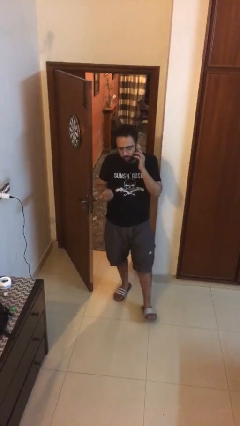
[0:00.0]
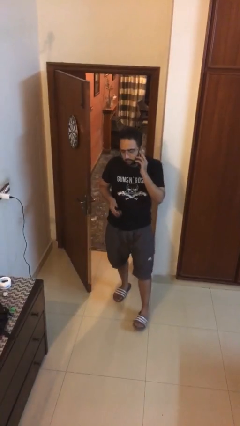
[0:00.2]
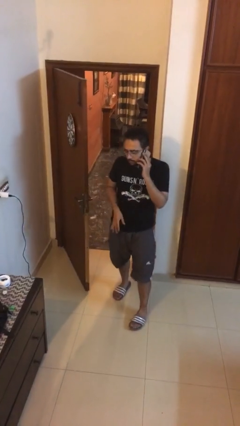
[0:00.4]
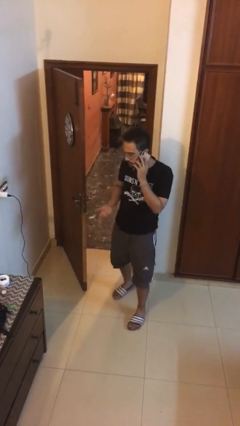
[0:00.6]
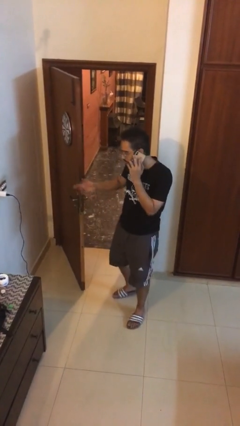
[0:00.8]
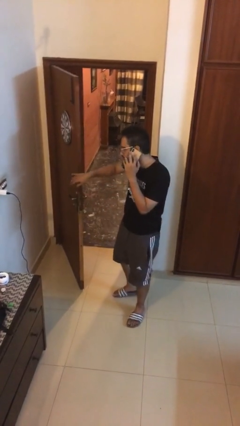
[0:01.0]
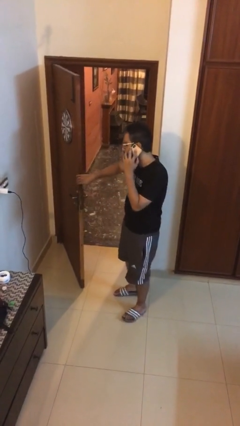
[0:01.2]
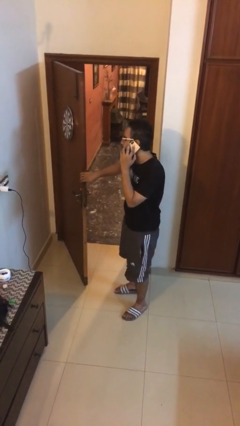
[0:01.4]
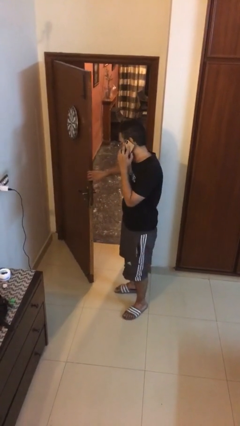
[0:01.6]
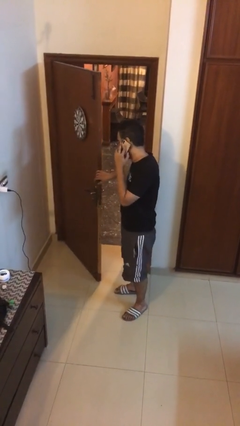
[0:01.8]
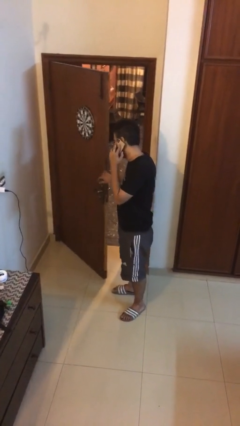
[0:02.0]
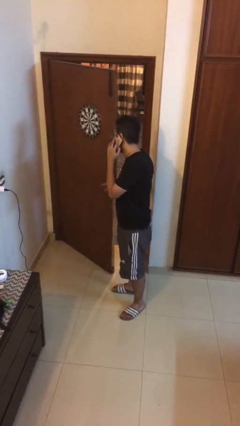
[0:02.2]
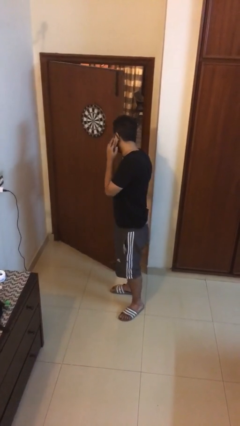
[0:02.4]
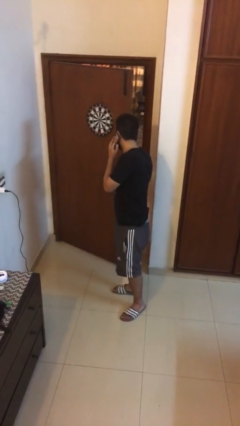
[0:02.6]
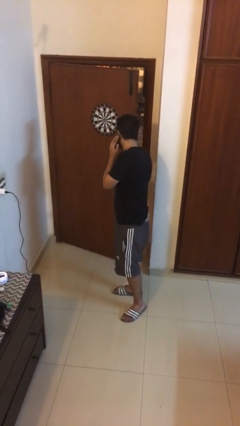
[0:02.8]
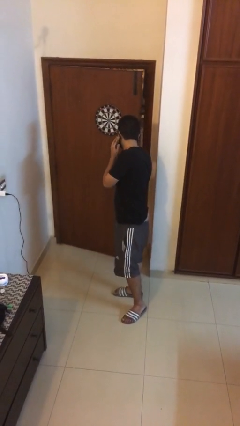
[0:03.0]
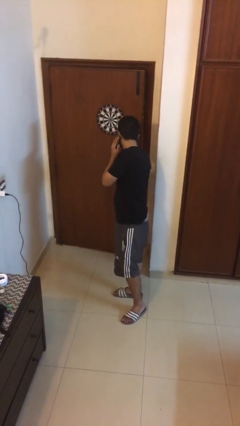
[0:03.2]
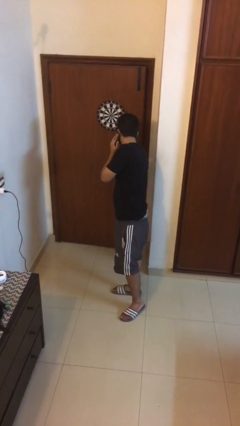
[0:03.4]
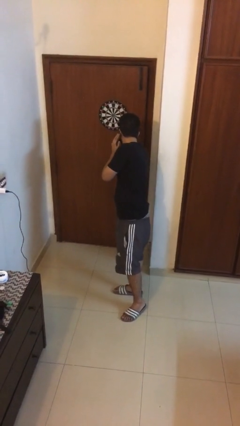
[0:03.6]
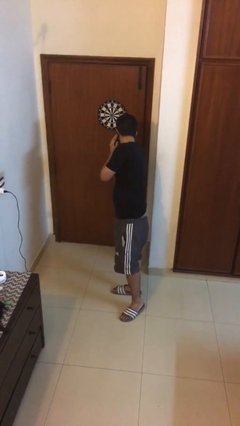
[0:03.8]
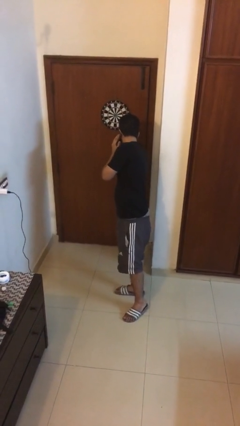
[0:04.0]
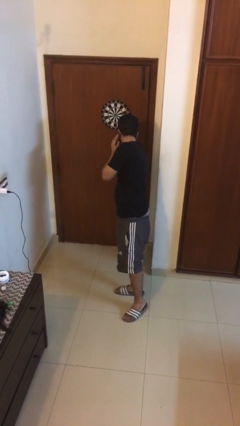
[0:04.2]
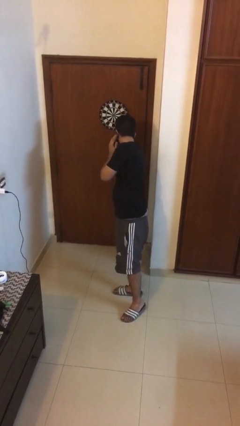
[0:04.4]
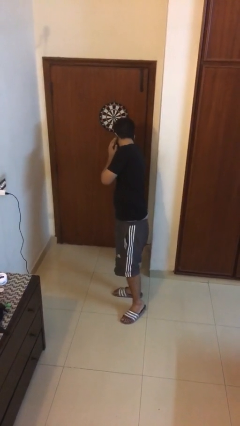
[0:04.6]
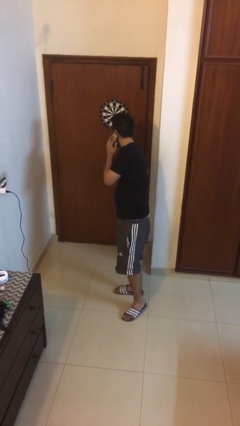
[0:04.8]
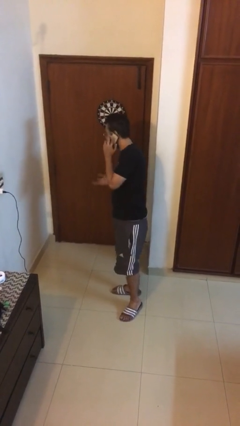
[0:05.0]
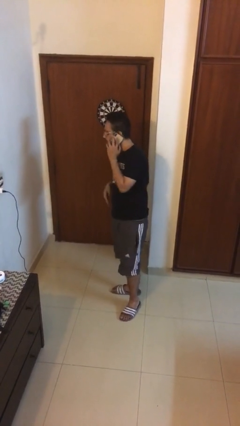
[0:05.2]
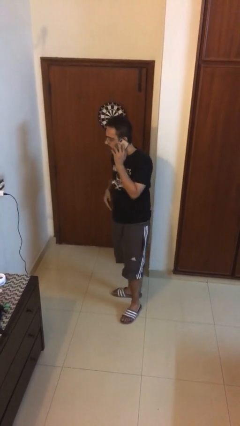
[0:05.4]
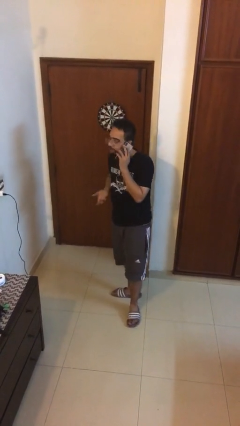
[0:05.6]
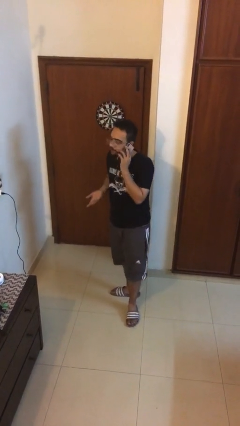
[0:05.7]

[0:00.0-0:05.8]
person closes facility door

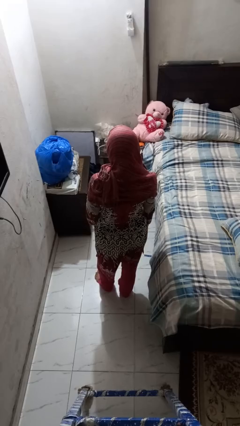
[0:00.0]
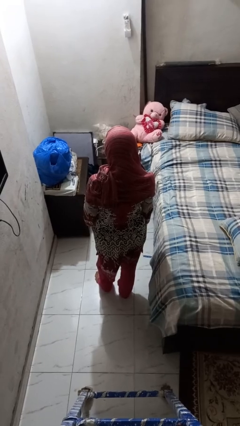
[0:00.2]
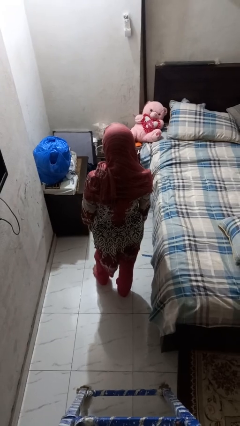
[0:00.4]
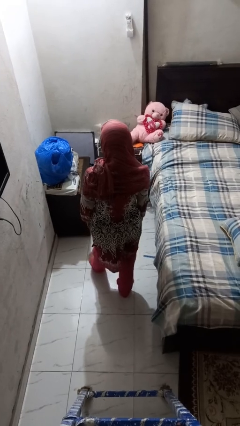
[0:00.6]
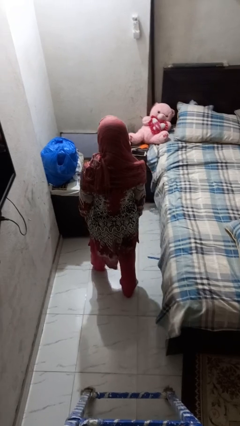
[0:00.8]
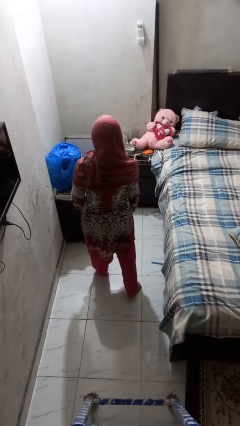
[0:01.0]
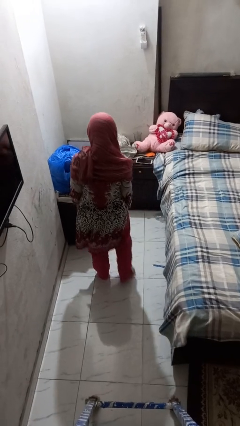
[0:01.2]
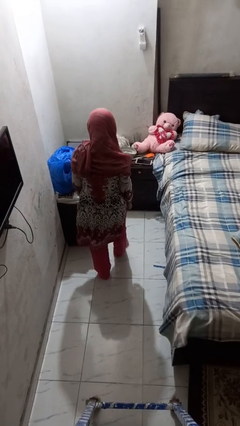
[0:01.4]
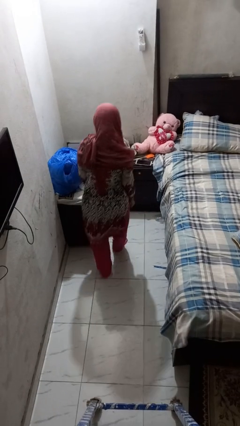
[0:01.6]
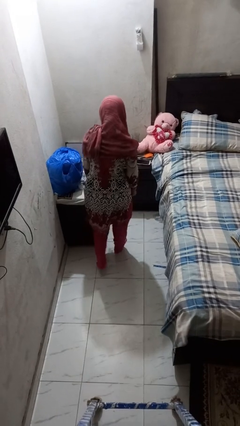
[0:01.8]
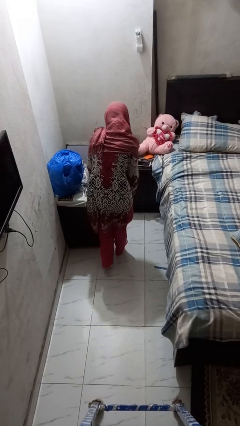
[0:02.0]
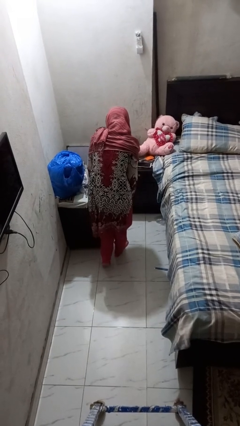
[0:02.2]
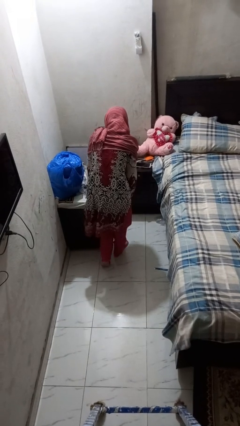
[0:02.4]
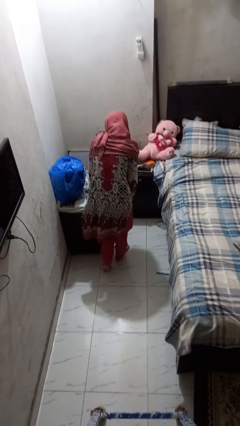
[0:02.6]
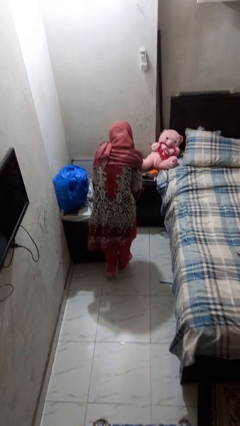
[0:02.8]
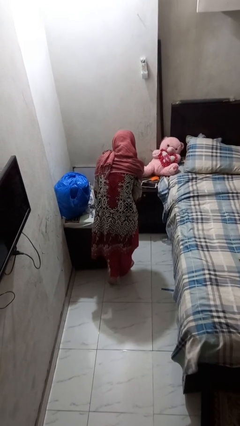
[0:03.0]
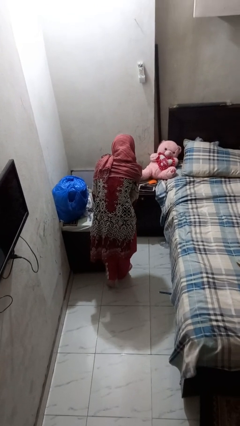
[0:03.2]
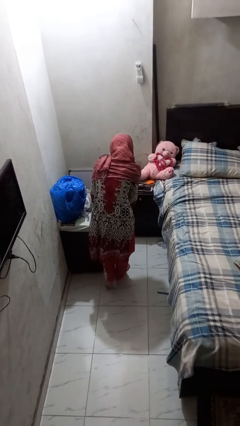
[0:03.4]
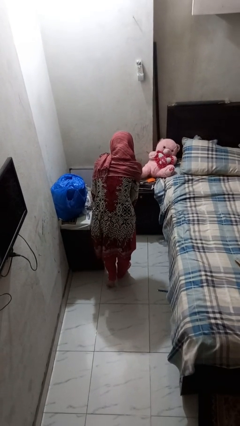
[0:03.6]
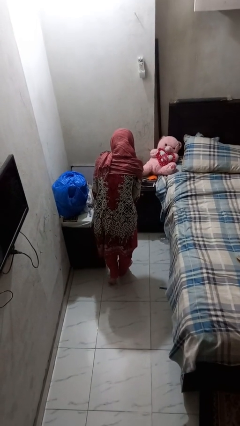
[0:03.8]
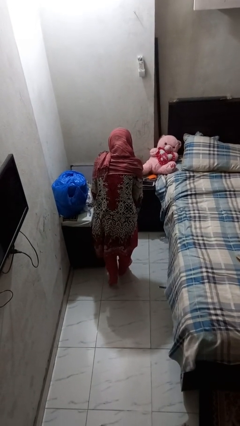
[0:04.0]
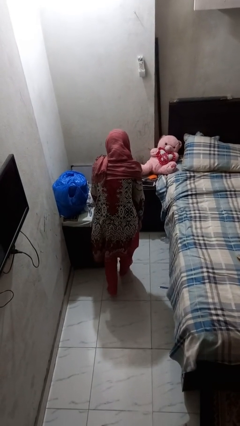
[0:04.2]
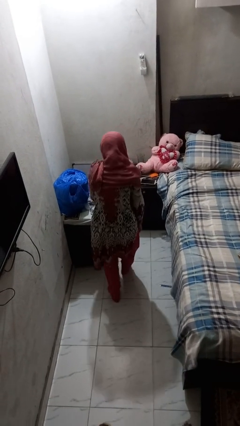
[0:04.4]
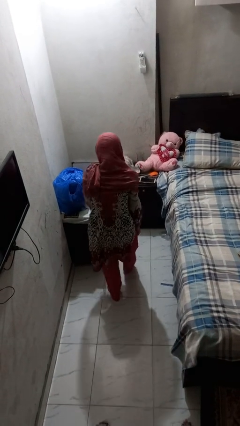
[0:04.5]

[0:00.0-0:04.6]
person bumps into table

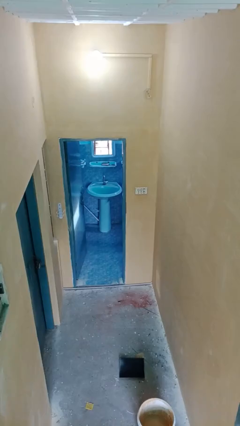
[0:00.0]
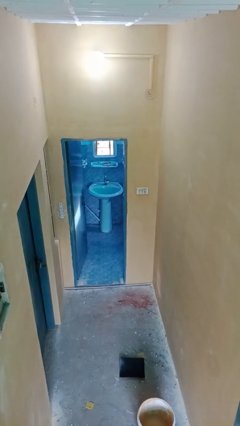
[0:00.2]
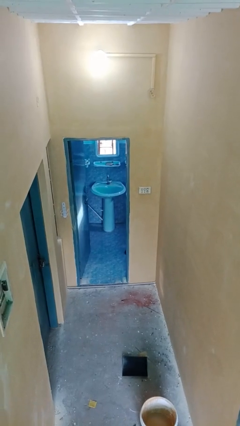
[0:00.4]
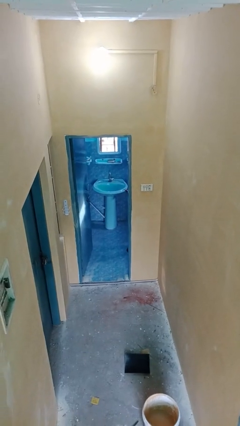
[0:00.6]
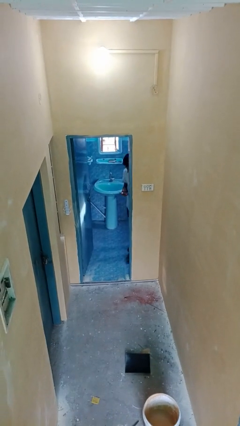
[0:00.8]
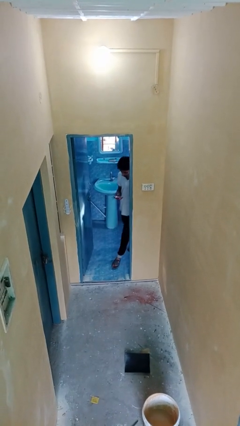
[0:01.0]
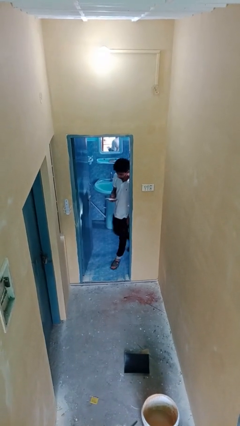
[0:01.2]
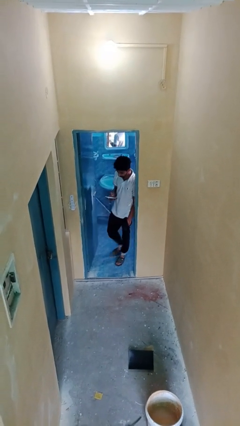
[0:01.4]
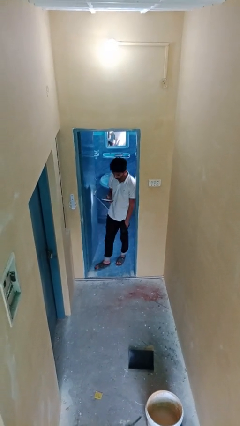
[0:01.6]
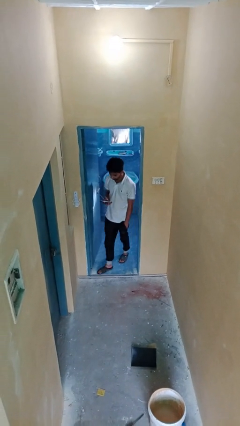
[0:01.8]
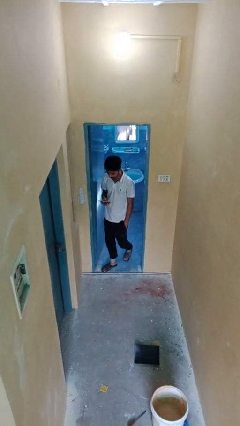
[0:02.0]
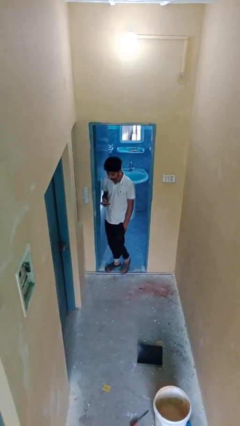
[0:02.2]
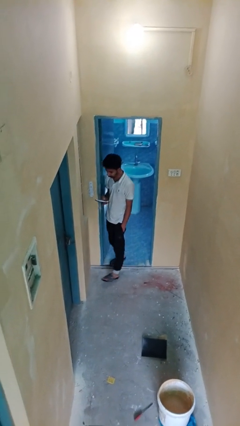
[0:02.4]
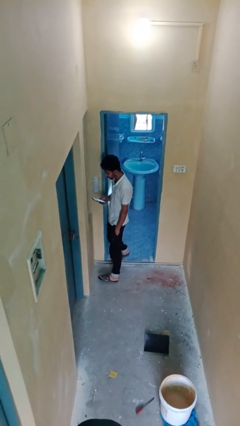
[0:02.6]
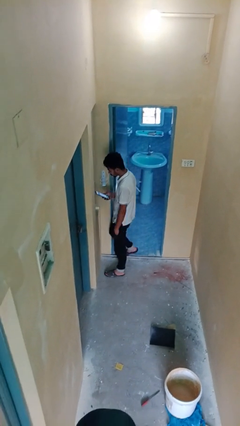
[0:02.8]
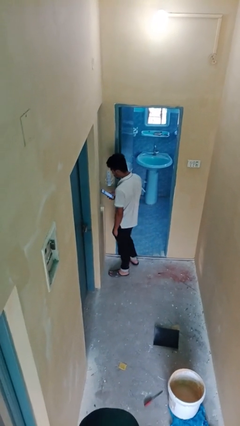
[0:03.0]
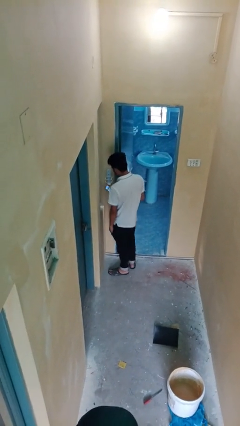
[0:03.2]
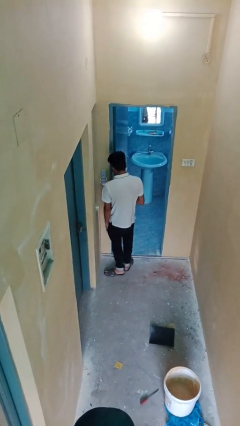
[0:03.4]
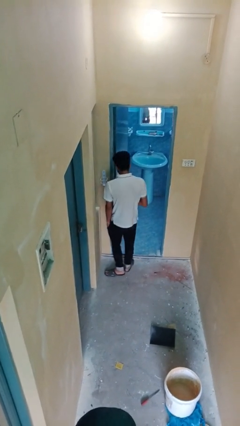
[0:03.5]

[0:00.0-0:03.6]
person enters scene through structure

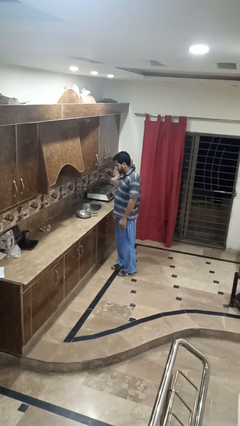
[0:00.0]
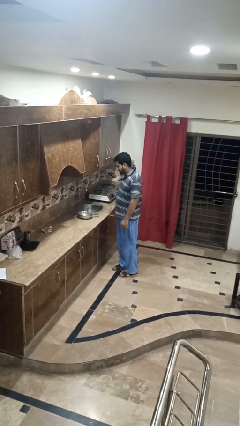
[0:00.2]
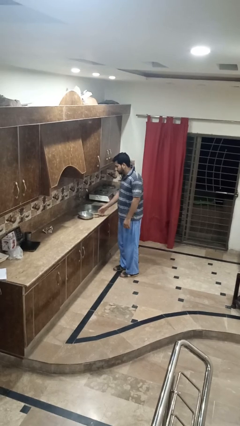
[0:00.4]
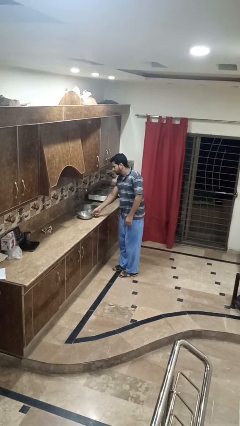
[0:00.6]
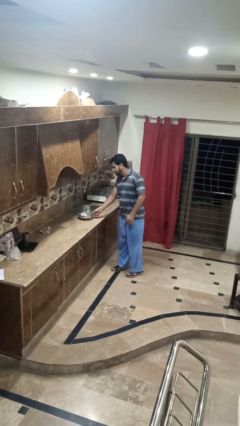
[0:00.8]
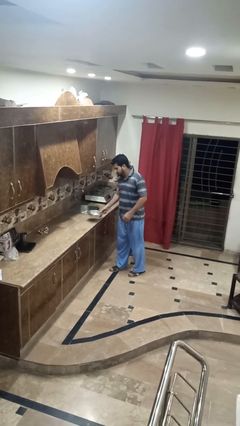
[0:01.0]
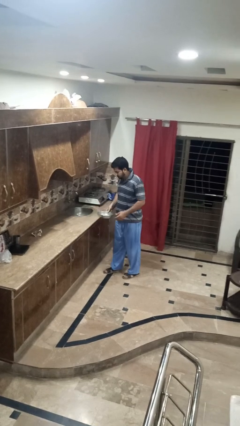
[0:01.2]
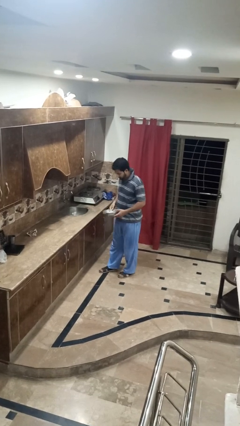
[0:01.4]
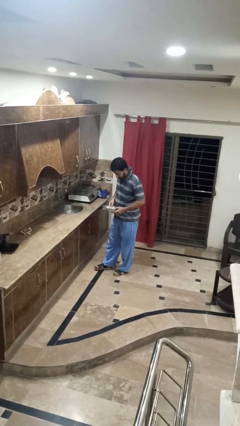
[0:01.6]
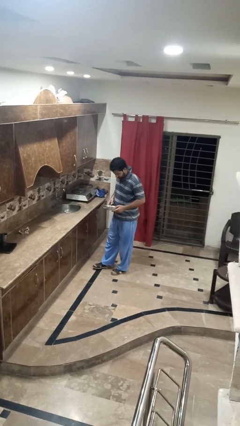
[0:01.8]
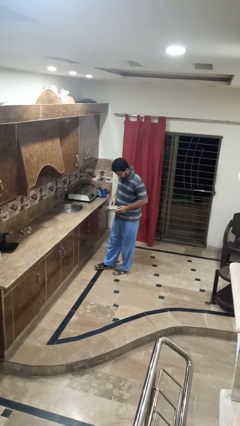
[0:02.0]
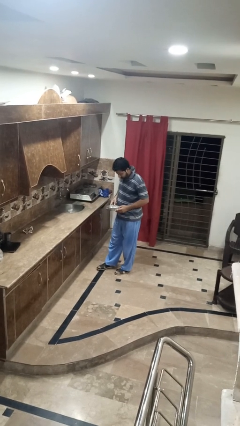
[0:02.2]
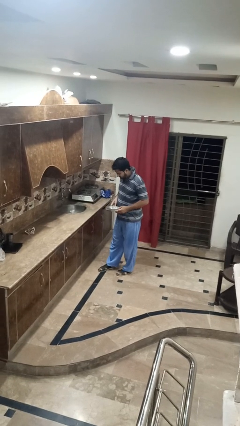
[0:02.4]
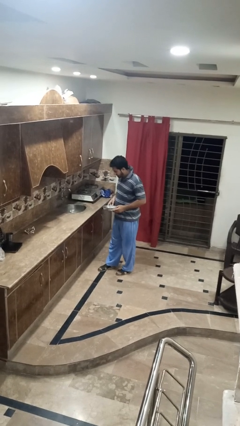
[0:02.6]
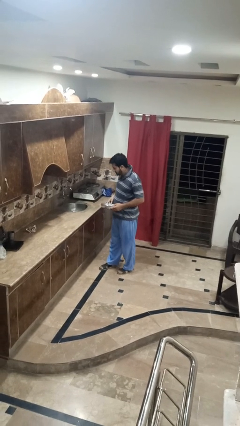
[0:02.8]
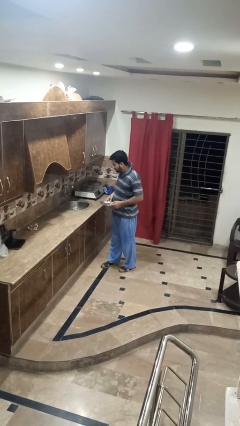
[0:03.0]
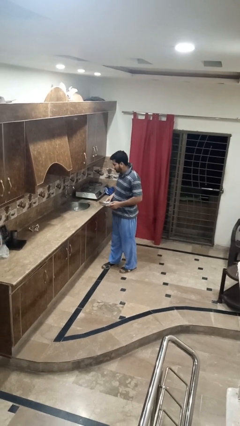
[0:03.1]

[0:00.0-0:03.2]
person picks up object from countertop

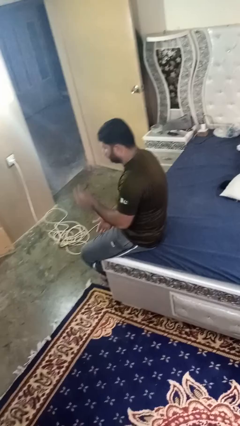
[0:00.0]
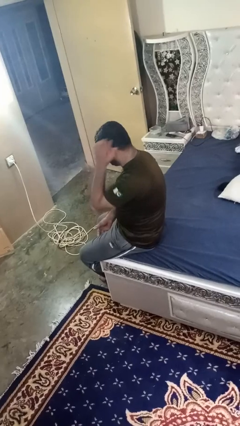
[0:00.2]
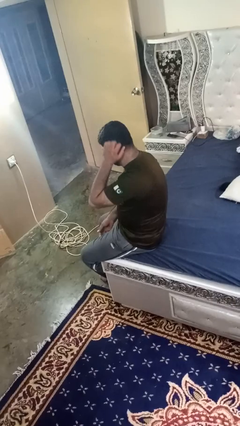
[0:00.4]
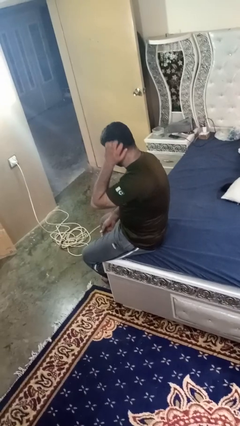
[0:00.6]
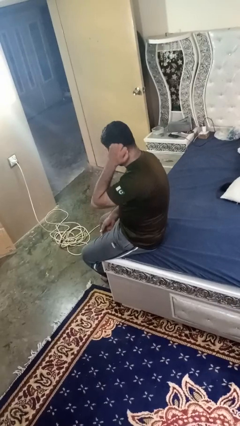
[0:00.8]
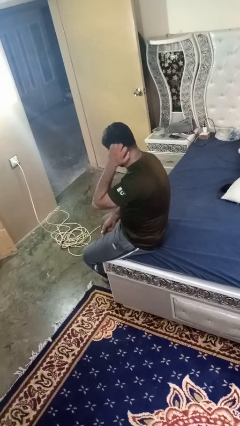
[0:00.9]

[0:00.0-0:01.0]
person strokes hair
